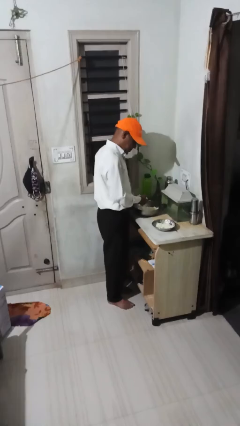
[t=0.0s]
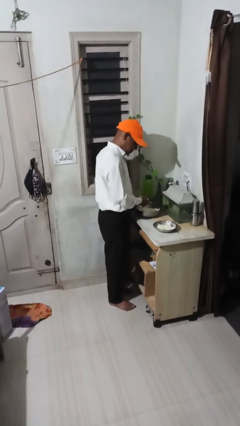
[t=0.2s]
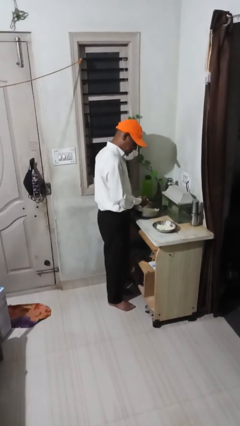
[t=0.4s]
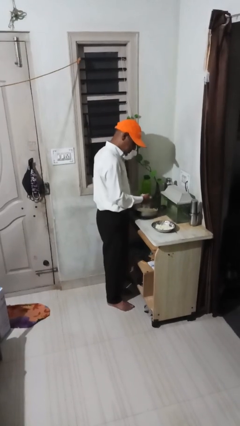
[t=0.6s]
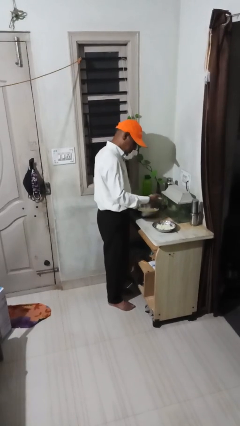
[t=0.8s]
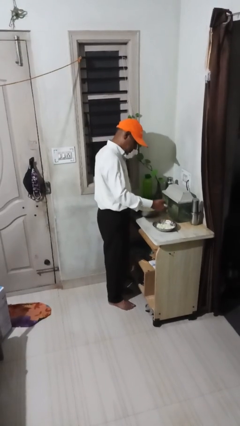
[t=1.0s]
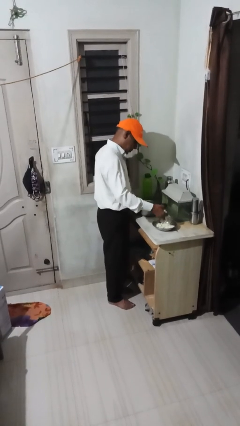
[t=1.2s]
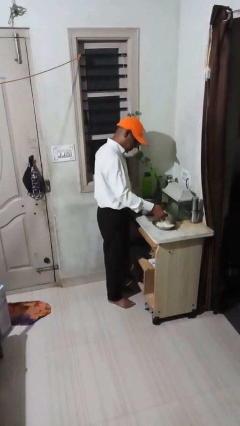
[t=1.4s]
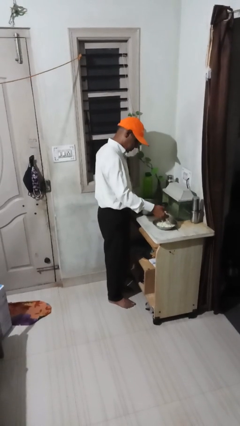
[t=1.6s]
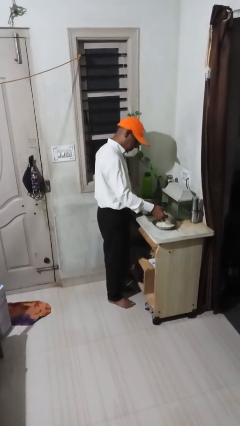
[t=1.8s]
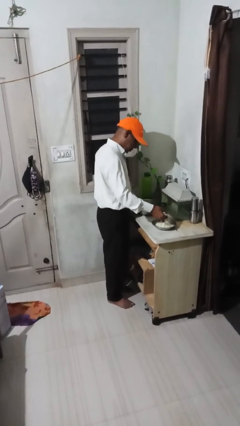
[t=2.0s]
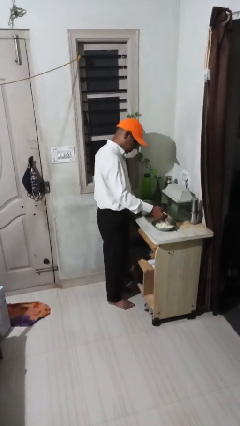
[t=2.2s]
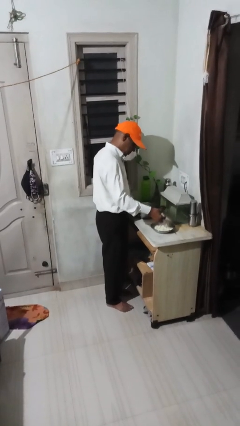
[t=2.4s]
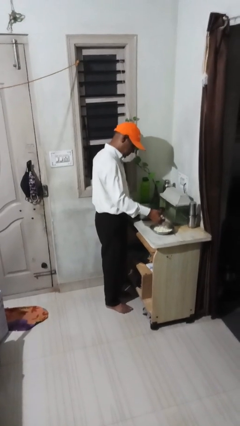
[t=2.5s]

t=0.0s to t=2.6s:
person pours into bowl

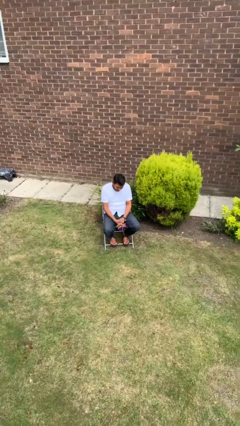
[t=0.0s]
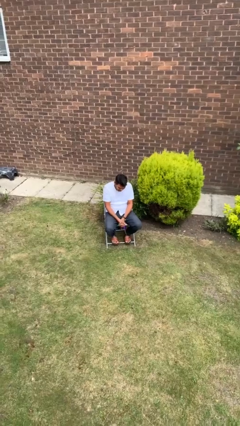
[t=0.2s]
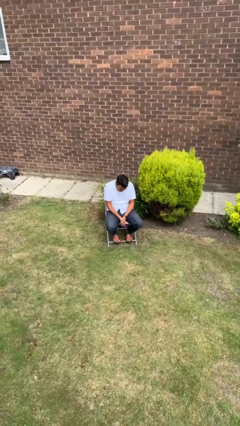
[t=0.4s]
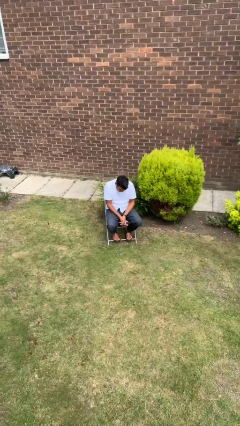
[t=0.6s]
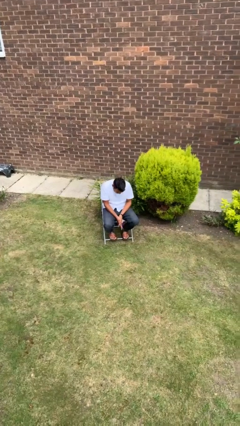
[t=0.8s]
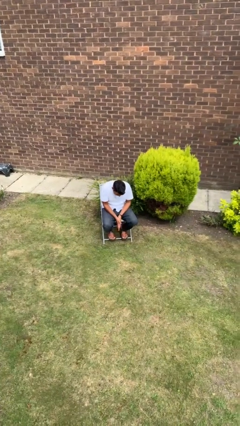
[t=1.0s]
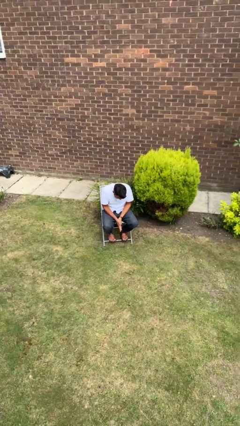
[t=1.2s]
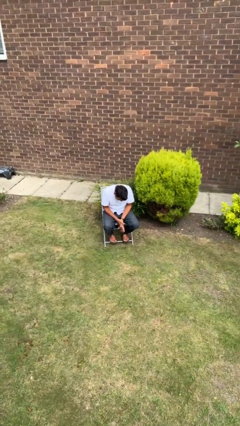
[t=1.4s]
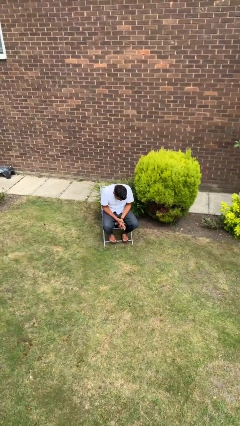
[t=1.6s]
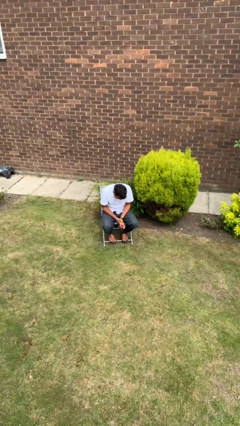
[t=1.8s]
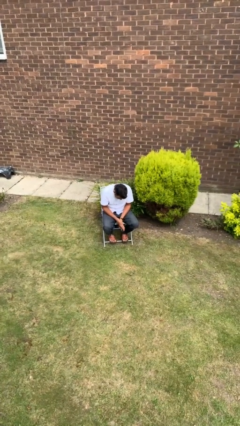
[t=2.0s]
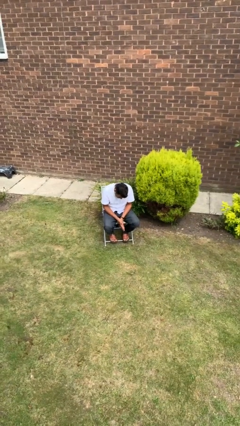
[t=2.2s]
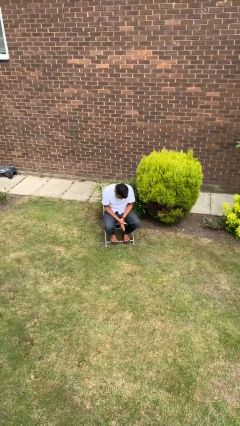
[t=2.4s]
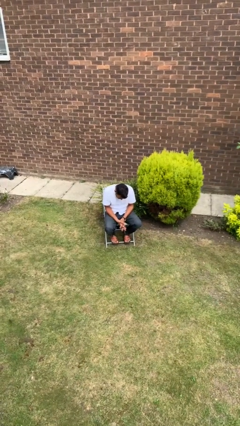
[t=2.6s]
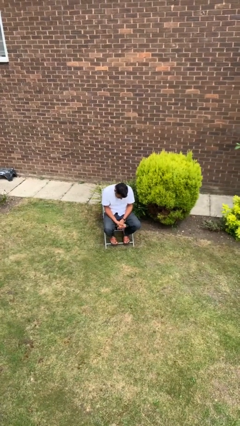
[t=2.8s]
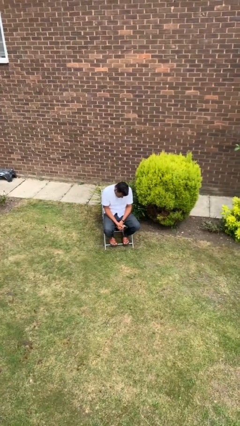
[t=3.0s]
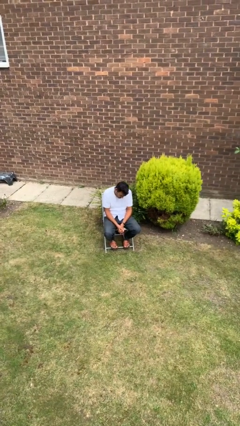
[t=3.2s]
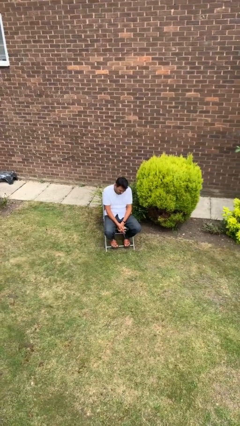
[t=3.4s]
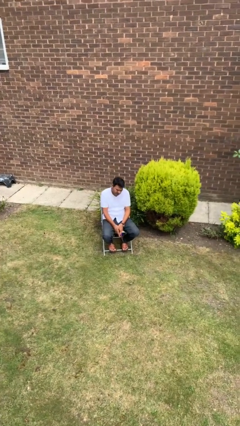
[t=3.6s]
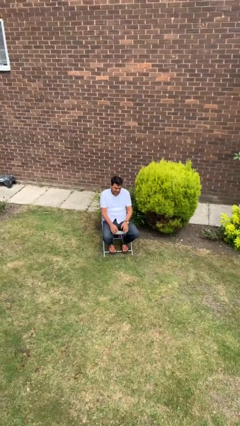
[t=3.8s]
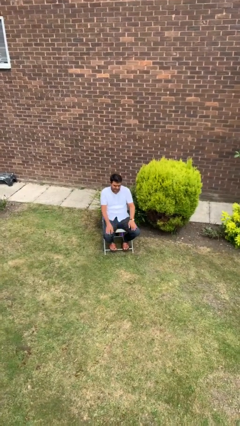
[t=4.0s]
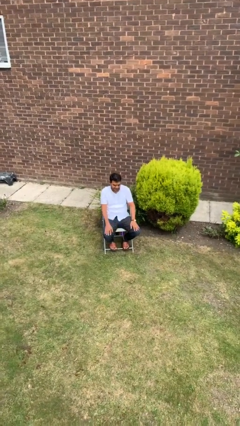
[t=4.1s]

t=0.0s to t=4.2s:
person looks at hands in lap

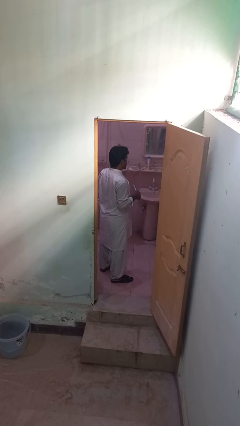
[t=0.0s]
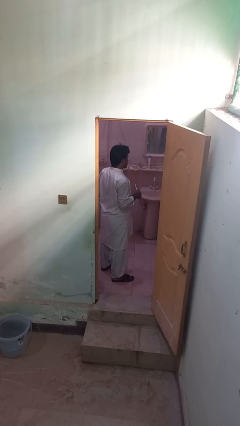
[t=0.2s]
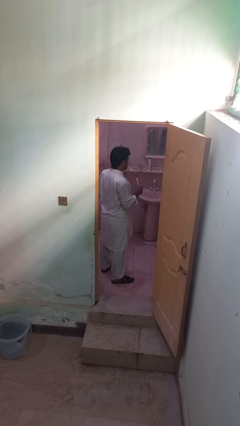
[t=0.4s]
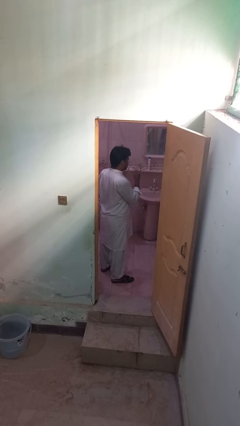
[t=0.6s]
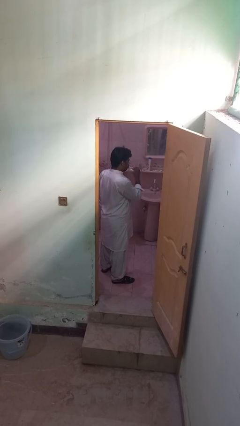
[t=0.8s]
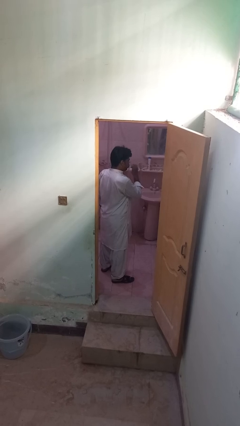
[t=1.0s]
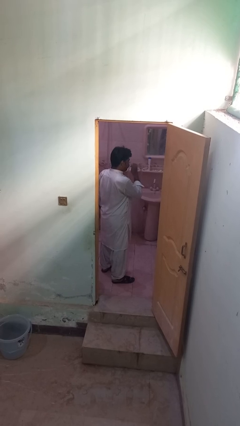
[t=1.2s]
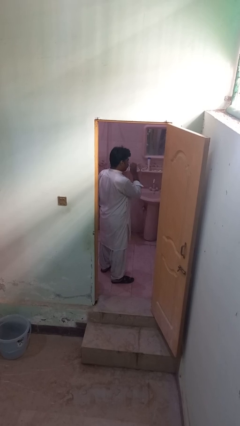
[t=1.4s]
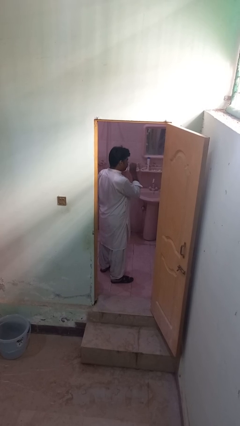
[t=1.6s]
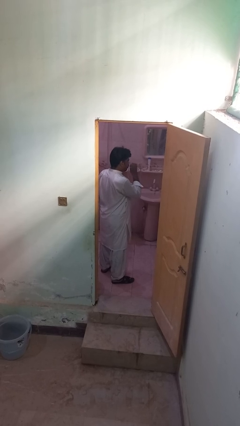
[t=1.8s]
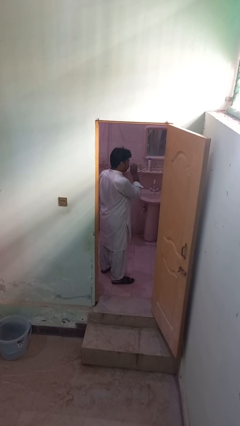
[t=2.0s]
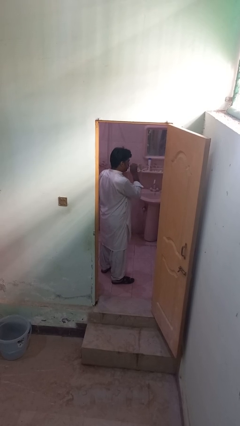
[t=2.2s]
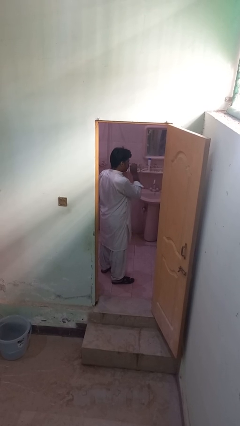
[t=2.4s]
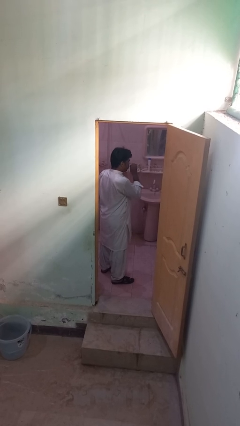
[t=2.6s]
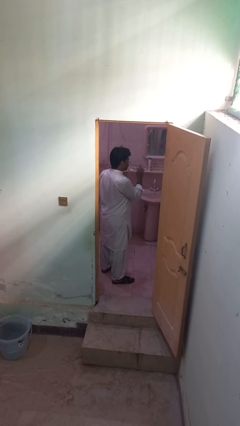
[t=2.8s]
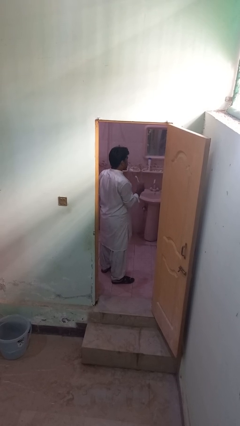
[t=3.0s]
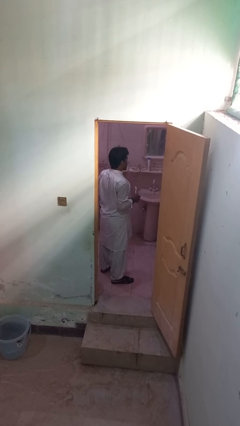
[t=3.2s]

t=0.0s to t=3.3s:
person brushes teeth

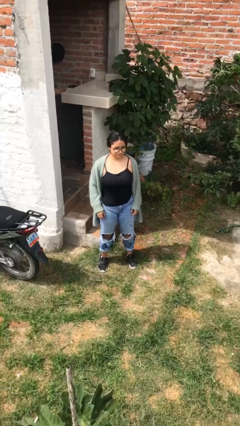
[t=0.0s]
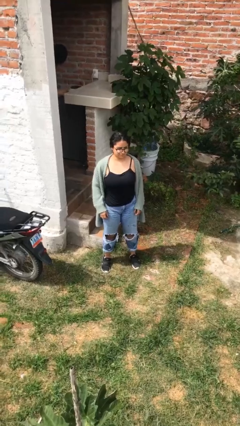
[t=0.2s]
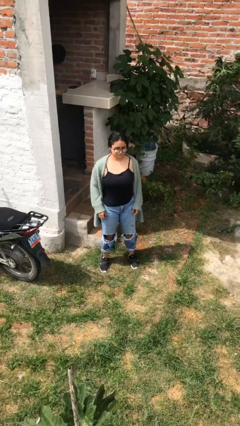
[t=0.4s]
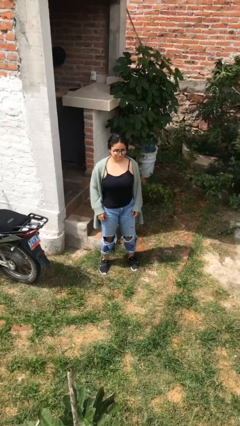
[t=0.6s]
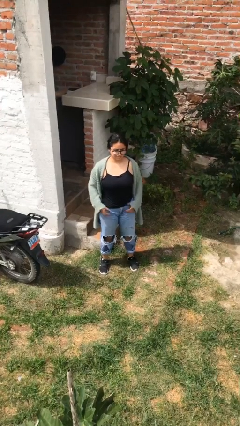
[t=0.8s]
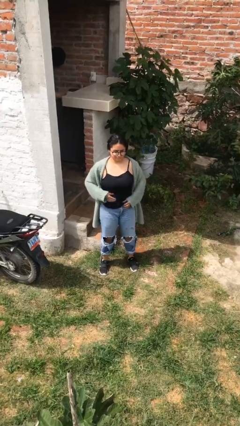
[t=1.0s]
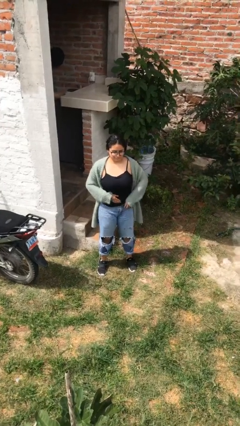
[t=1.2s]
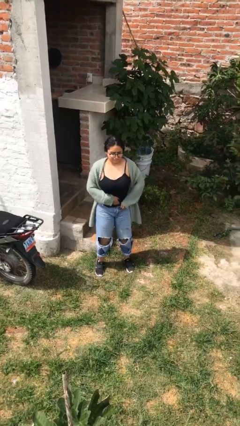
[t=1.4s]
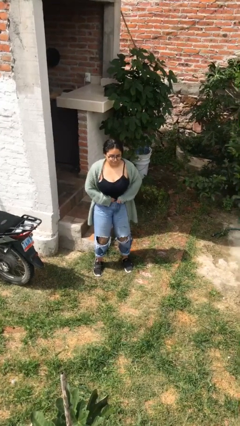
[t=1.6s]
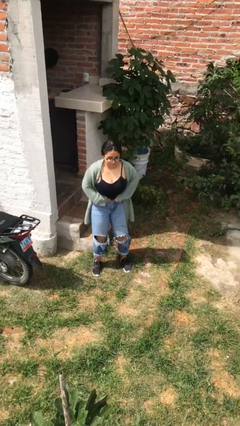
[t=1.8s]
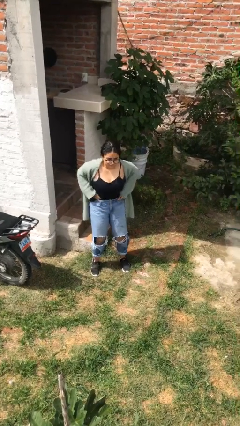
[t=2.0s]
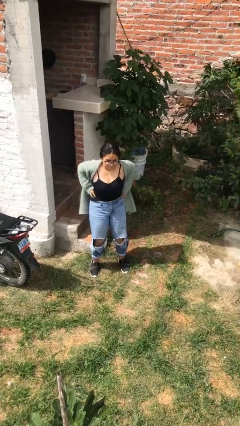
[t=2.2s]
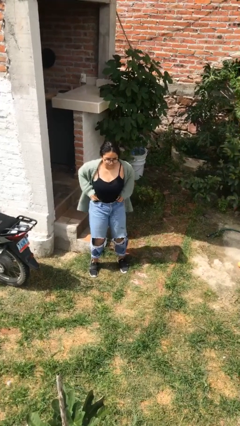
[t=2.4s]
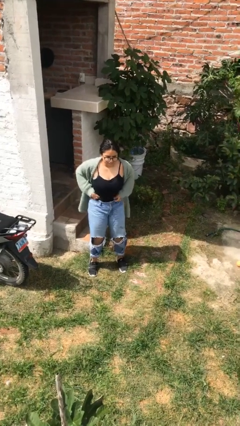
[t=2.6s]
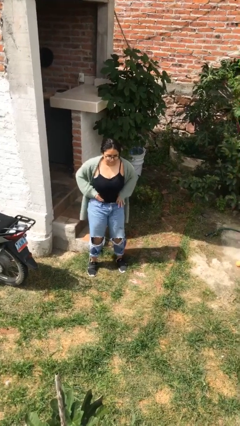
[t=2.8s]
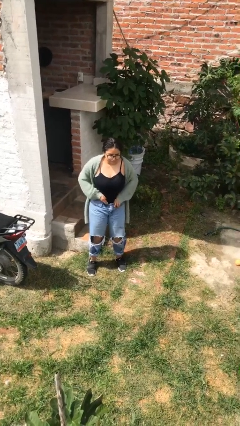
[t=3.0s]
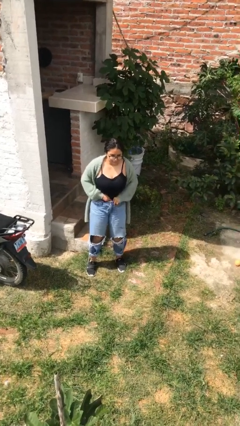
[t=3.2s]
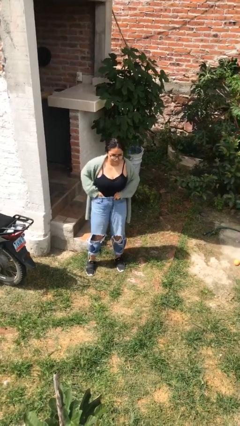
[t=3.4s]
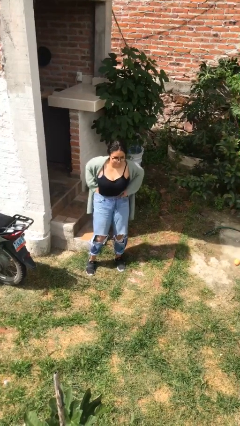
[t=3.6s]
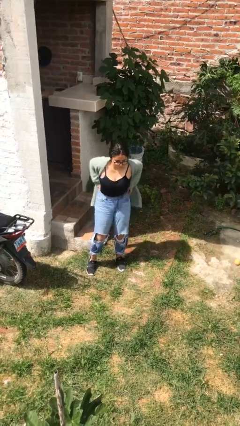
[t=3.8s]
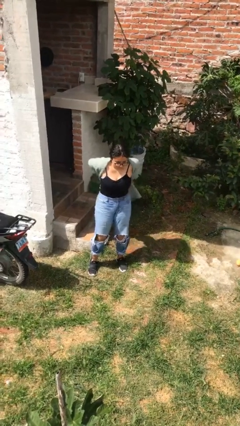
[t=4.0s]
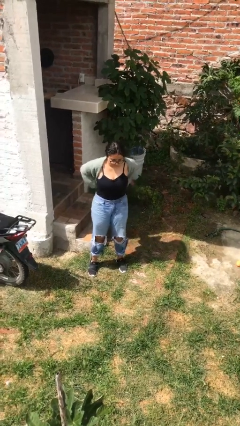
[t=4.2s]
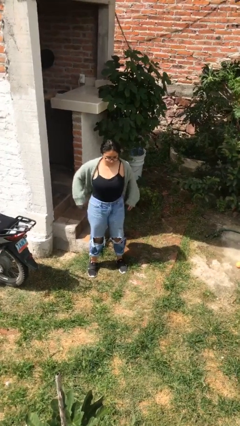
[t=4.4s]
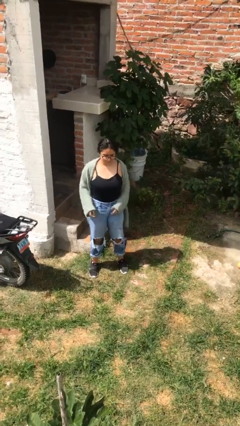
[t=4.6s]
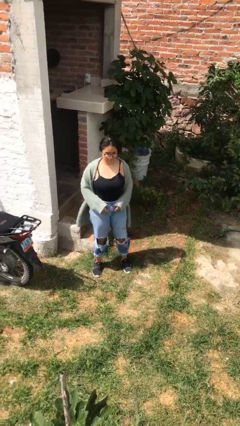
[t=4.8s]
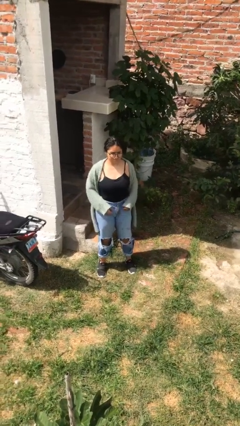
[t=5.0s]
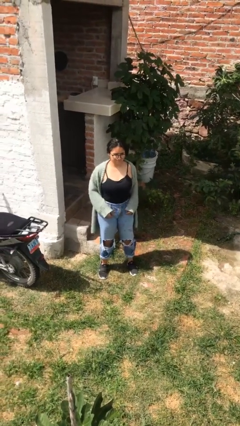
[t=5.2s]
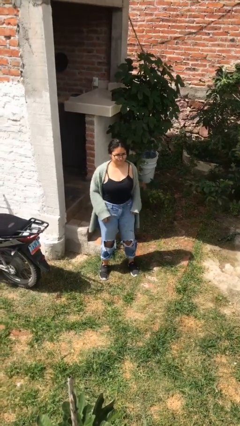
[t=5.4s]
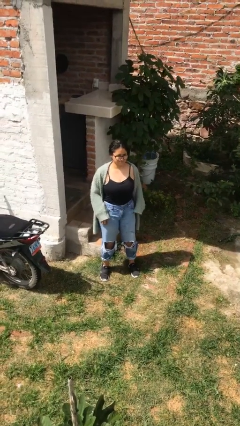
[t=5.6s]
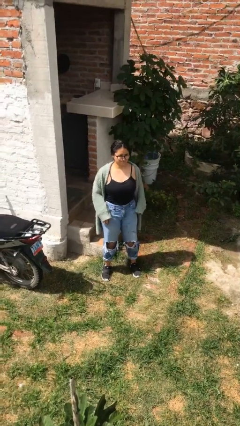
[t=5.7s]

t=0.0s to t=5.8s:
person tucks in shirt

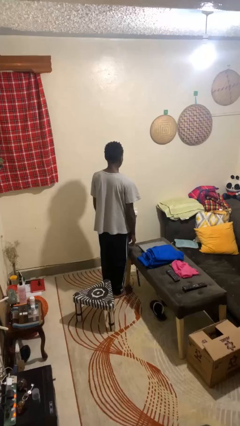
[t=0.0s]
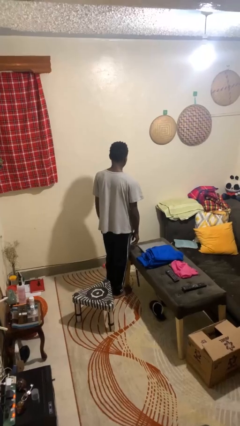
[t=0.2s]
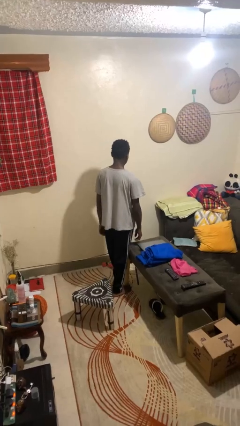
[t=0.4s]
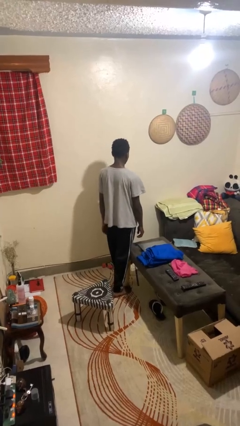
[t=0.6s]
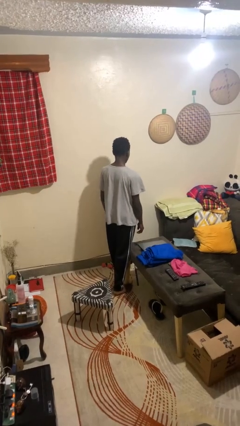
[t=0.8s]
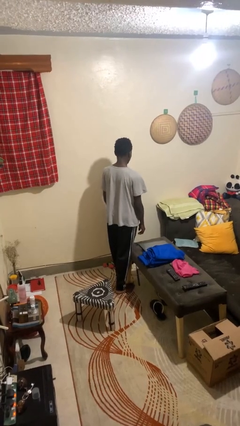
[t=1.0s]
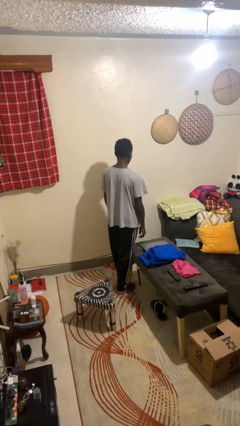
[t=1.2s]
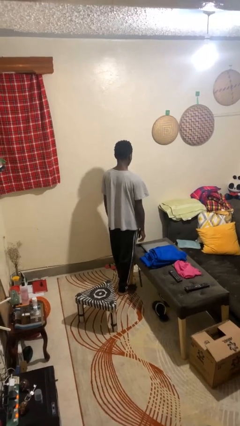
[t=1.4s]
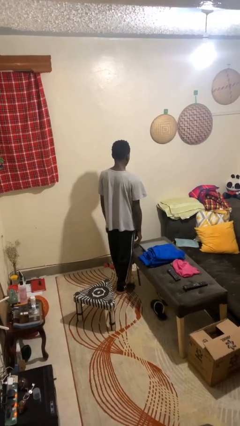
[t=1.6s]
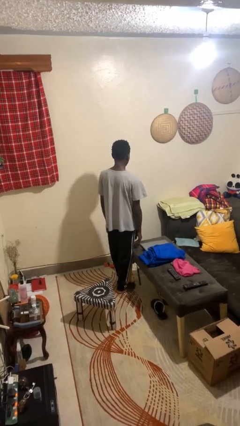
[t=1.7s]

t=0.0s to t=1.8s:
person bumps into table
